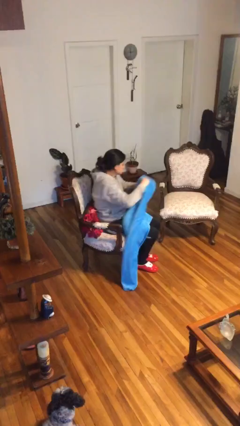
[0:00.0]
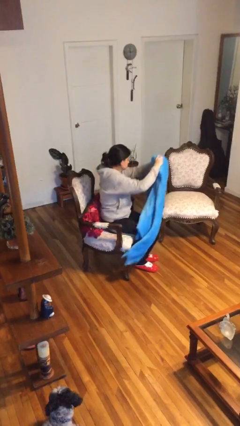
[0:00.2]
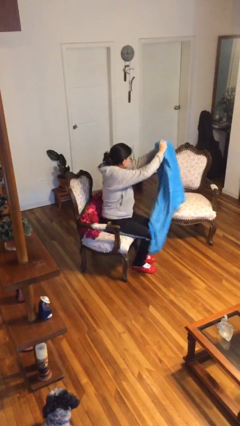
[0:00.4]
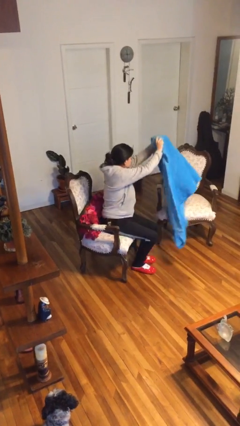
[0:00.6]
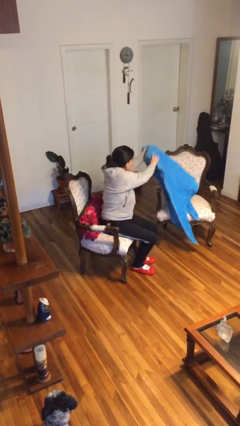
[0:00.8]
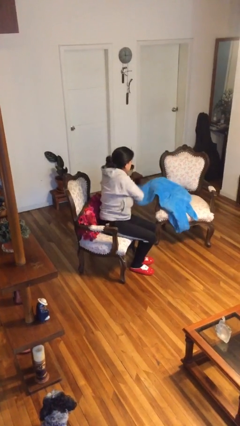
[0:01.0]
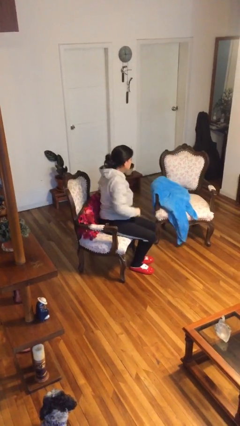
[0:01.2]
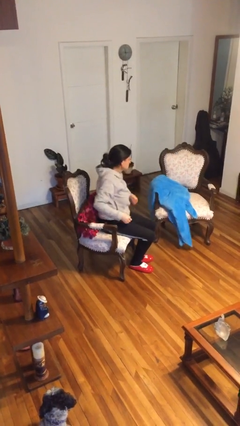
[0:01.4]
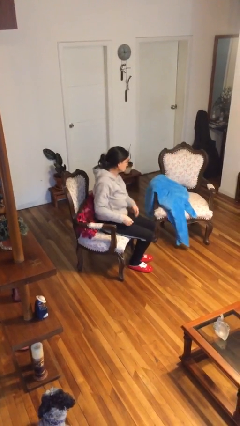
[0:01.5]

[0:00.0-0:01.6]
person uncovers with blanket

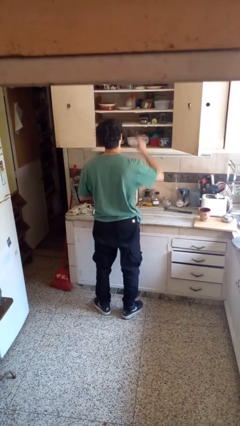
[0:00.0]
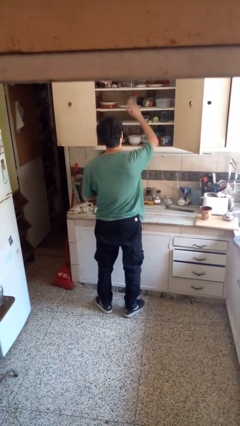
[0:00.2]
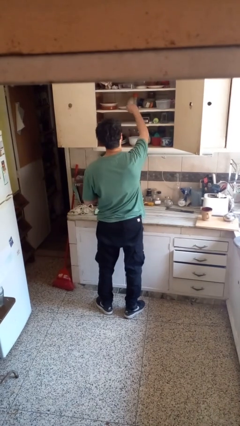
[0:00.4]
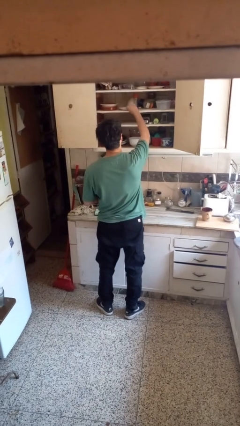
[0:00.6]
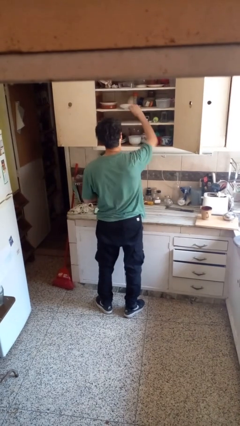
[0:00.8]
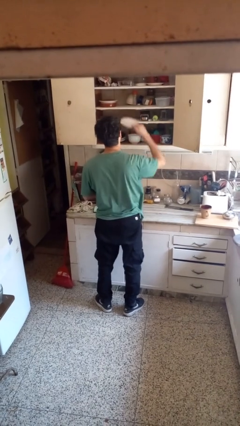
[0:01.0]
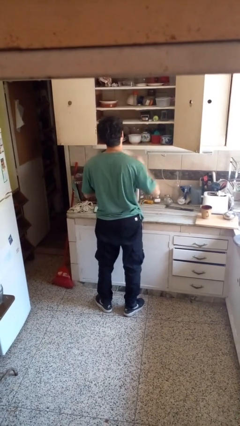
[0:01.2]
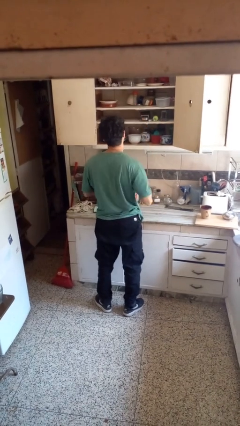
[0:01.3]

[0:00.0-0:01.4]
person takes object from cabinet

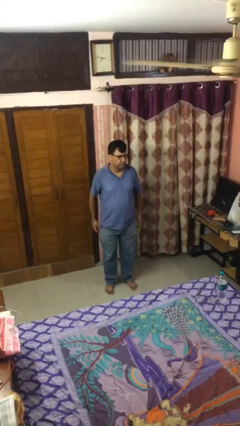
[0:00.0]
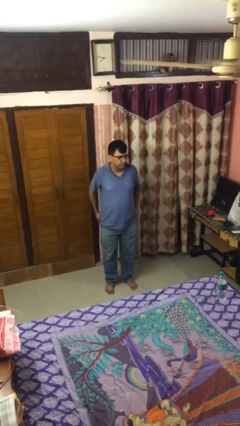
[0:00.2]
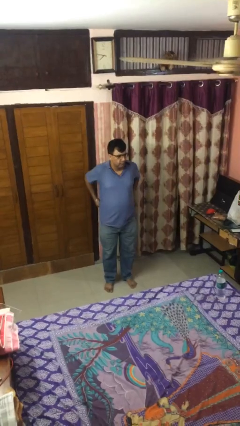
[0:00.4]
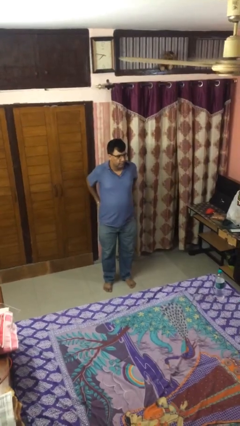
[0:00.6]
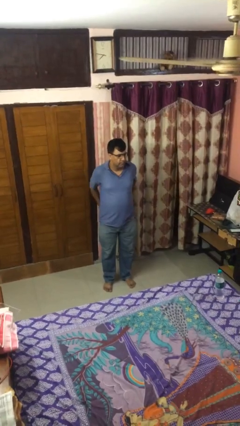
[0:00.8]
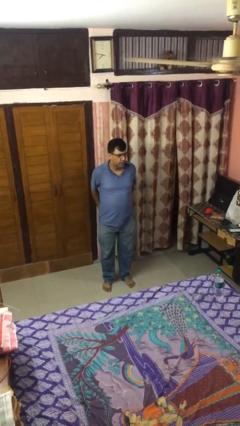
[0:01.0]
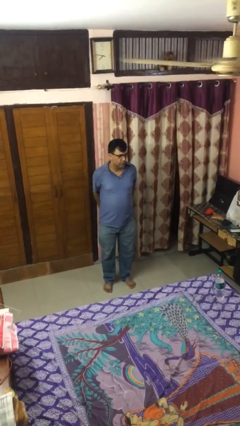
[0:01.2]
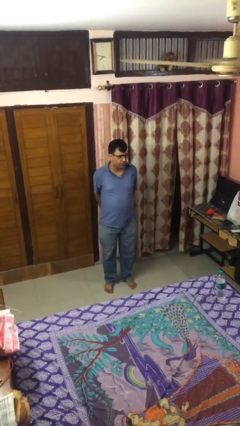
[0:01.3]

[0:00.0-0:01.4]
person puts hands in back pockets

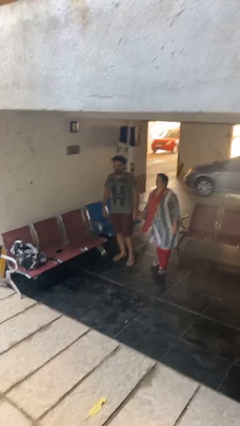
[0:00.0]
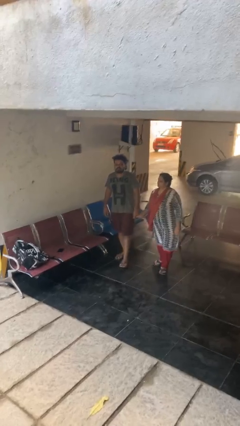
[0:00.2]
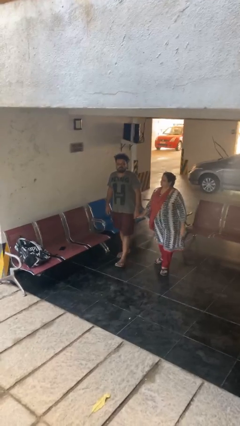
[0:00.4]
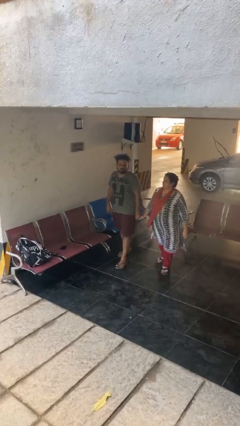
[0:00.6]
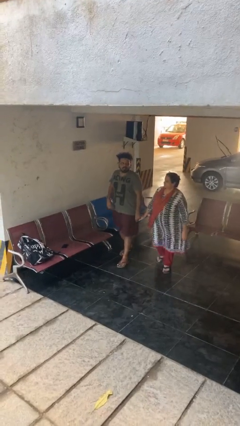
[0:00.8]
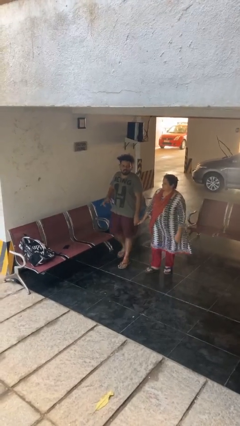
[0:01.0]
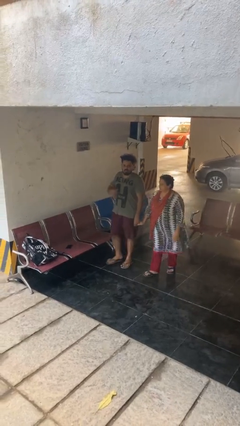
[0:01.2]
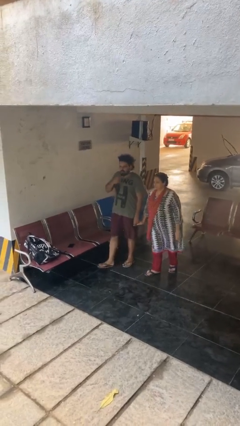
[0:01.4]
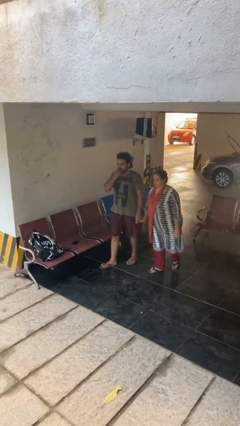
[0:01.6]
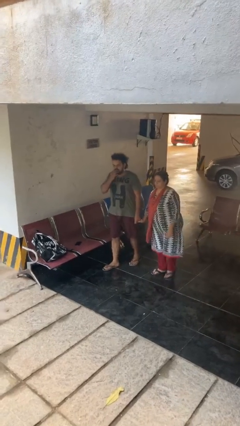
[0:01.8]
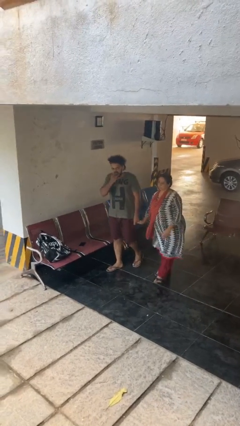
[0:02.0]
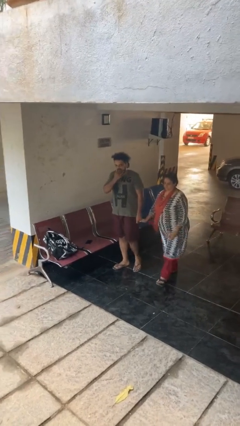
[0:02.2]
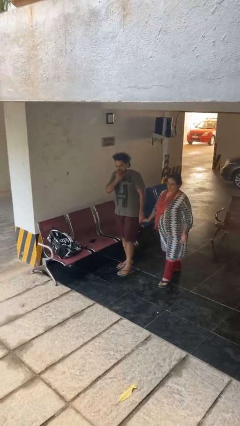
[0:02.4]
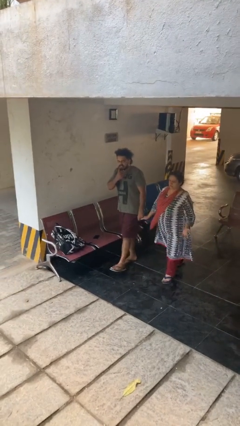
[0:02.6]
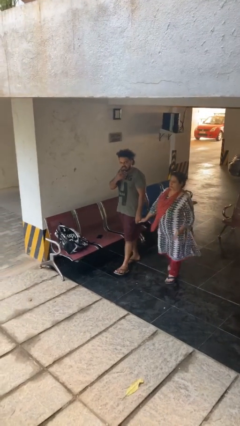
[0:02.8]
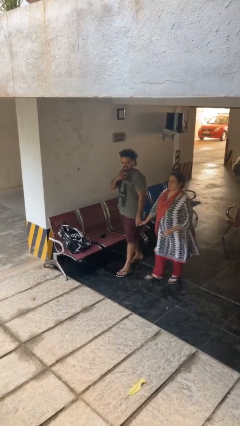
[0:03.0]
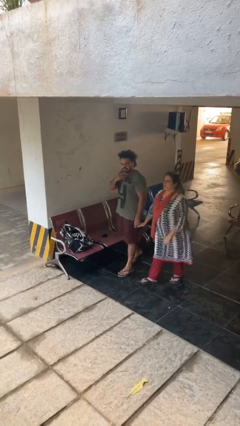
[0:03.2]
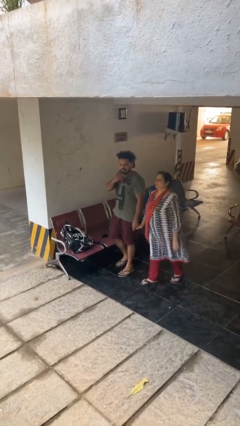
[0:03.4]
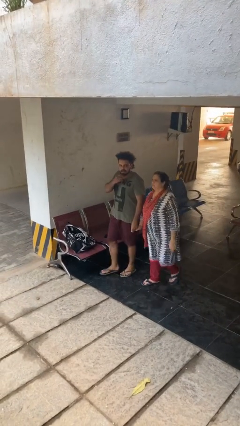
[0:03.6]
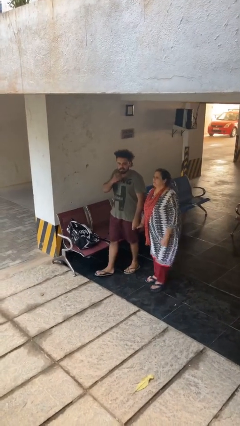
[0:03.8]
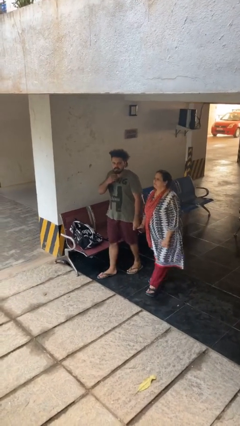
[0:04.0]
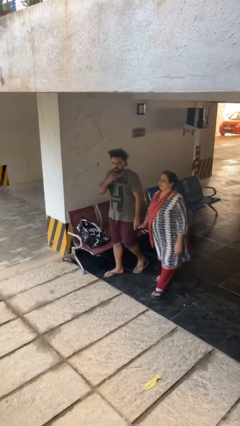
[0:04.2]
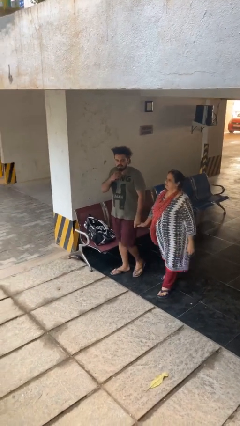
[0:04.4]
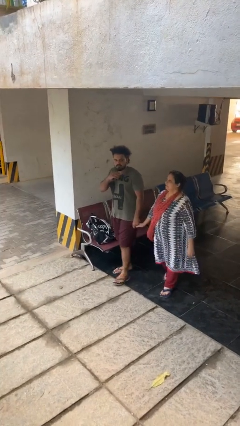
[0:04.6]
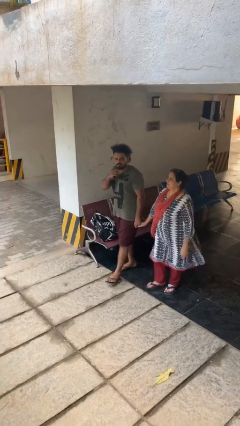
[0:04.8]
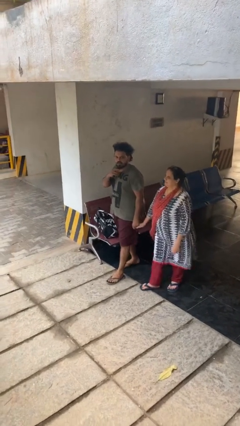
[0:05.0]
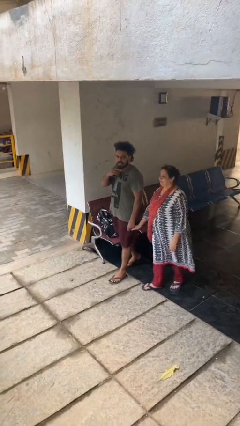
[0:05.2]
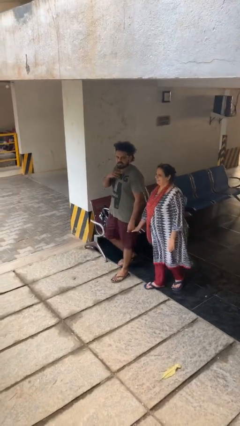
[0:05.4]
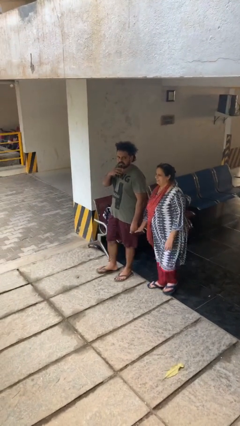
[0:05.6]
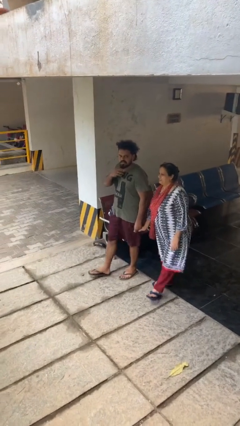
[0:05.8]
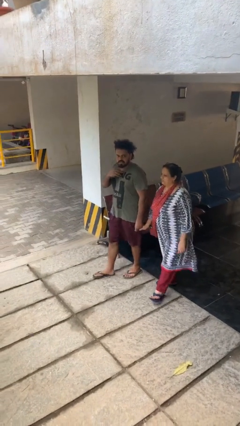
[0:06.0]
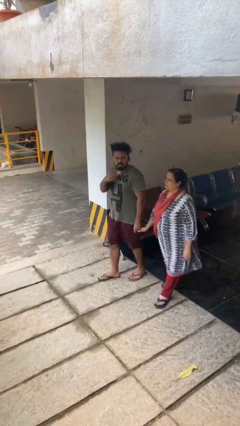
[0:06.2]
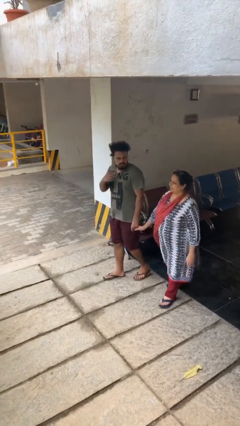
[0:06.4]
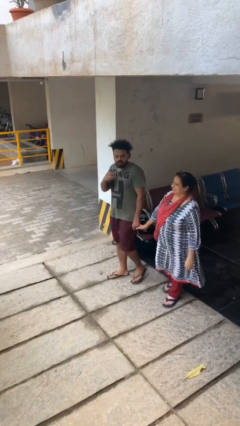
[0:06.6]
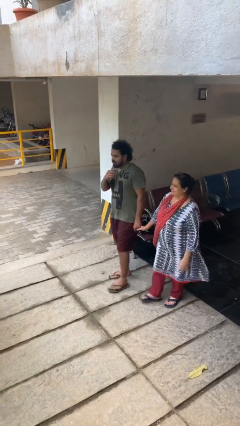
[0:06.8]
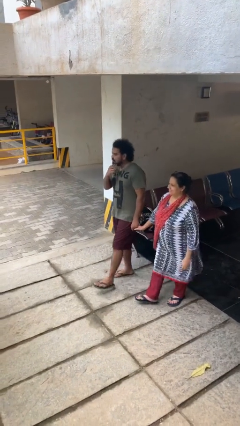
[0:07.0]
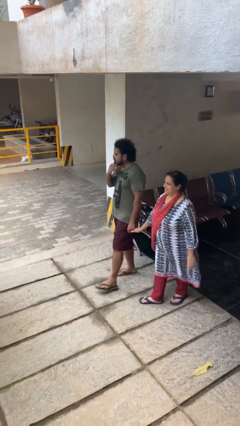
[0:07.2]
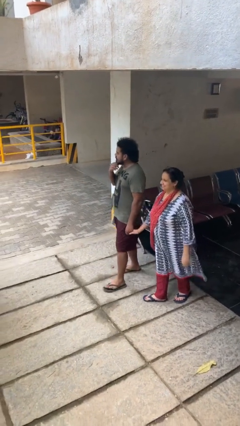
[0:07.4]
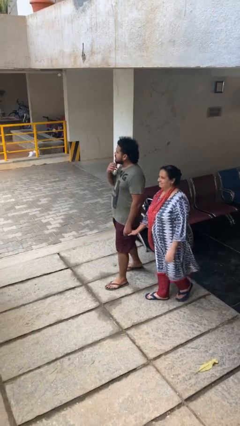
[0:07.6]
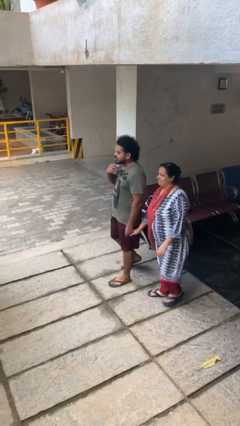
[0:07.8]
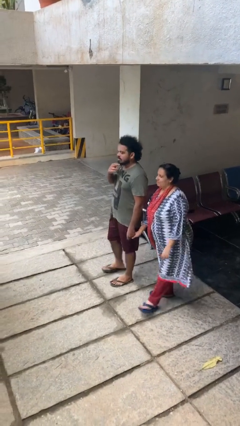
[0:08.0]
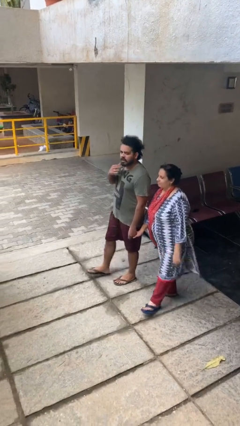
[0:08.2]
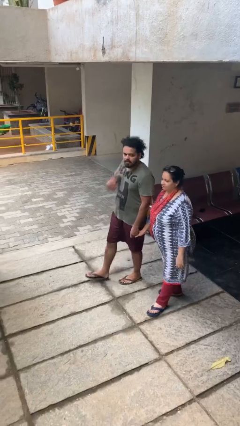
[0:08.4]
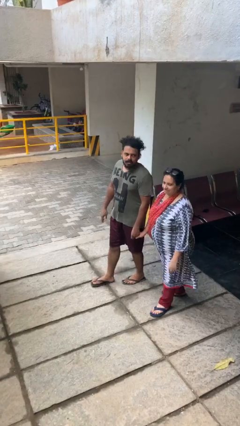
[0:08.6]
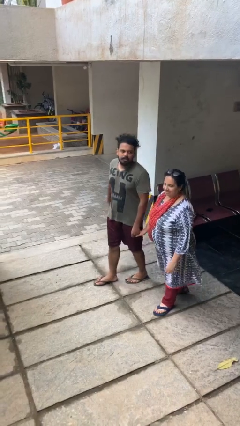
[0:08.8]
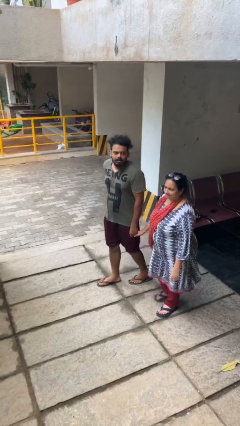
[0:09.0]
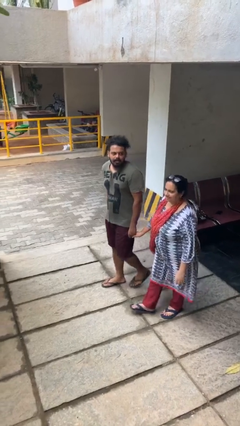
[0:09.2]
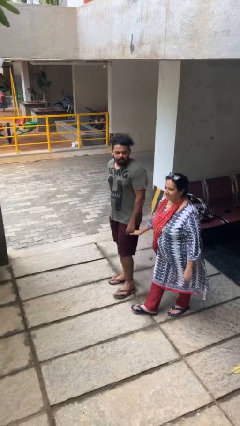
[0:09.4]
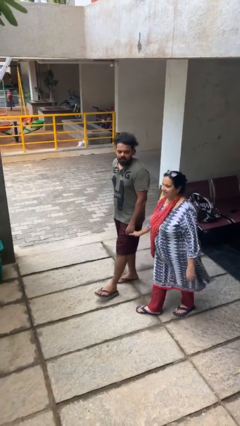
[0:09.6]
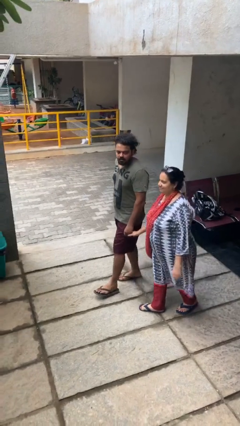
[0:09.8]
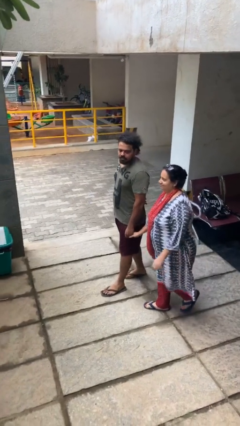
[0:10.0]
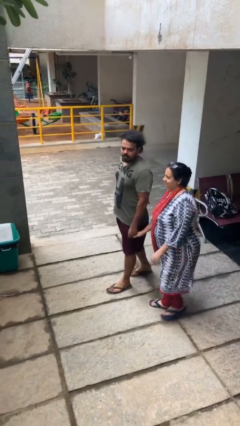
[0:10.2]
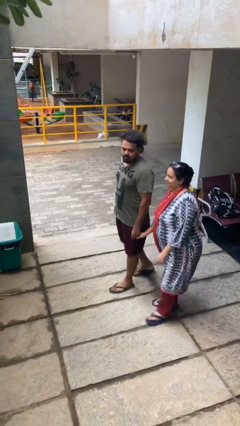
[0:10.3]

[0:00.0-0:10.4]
person holds hand

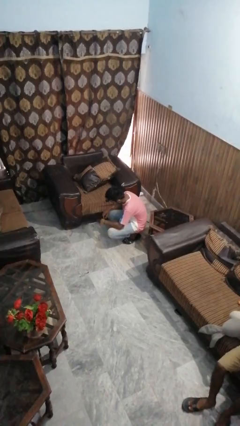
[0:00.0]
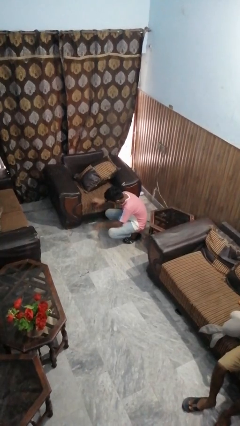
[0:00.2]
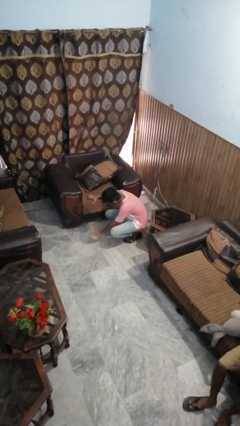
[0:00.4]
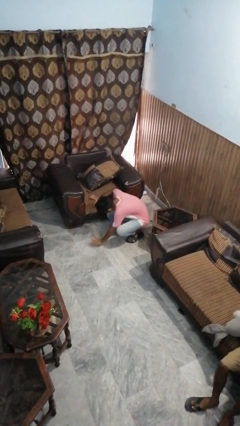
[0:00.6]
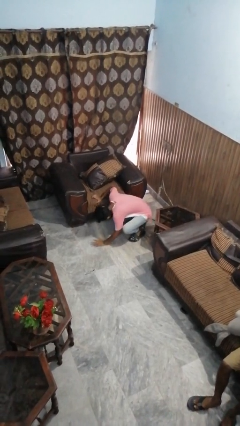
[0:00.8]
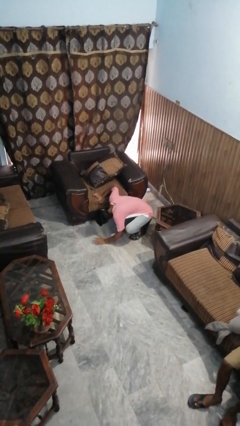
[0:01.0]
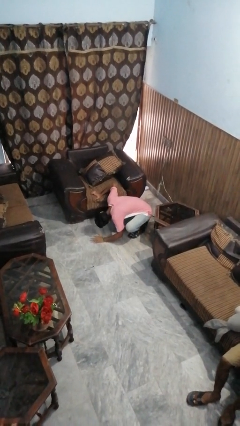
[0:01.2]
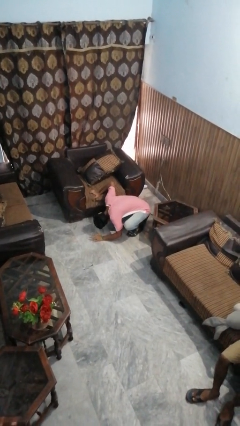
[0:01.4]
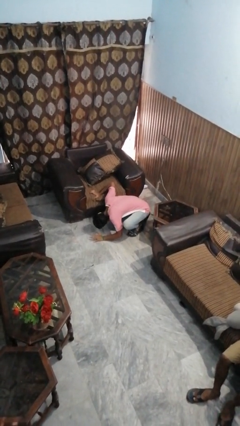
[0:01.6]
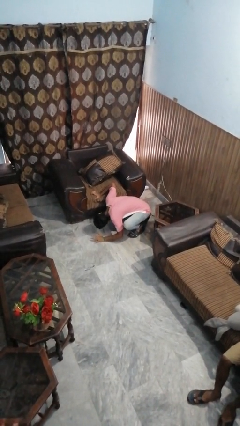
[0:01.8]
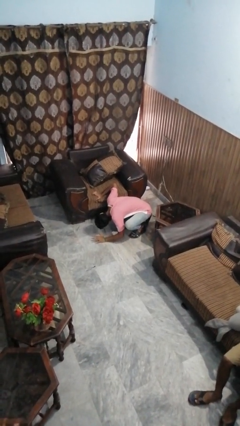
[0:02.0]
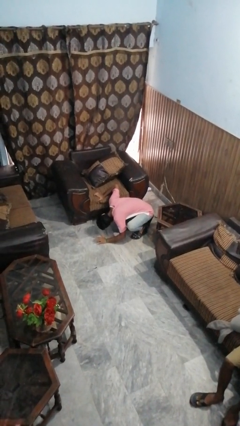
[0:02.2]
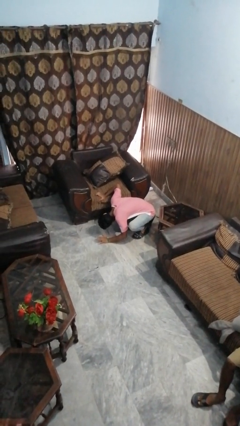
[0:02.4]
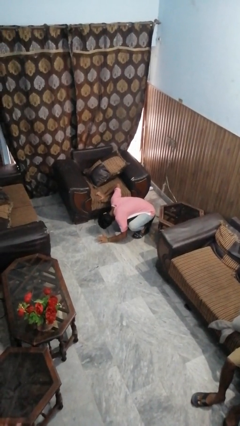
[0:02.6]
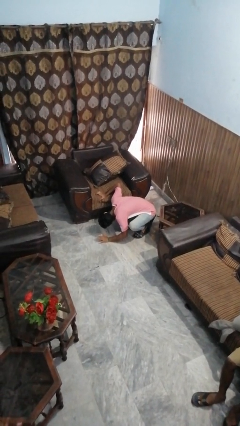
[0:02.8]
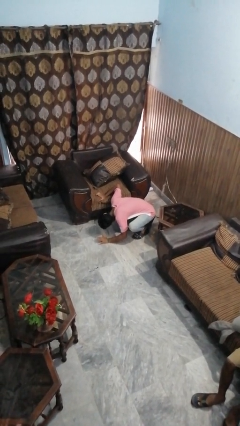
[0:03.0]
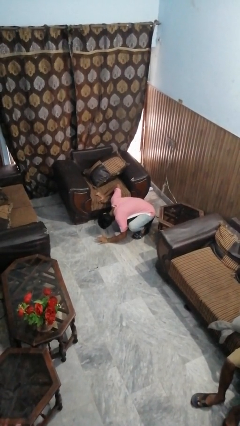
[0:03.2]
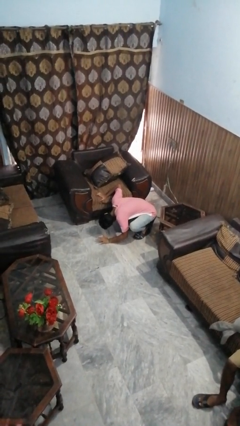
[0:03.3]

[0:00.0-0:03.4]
person searches under couch
